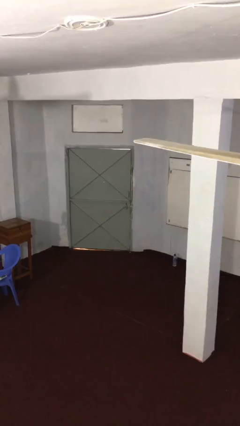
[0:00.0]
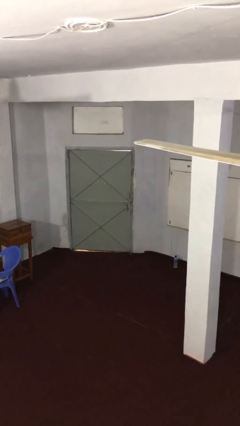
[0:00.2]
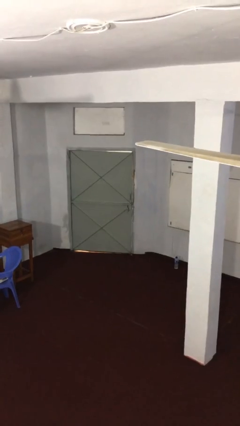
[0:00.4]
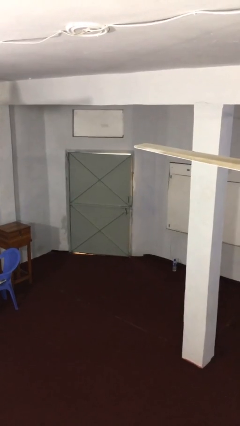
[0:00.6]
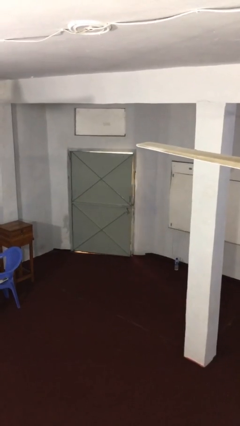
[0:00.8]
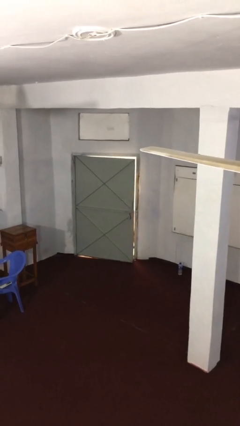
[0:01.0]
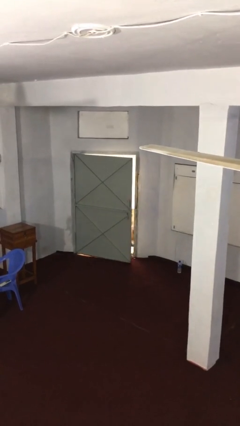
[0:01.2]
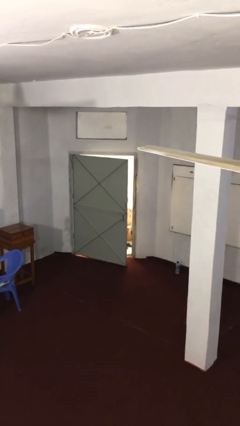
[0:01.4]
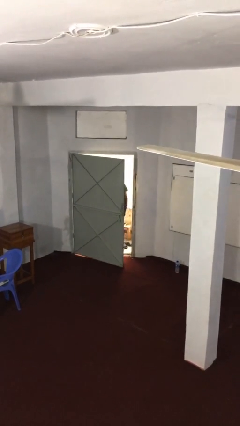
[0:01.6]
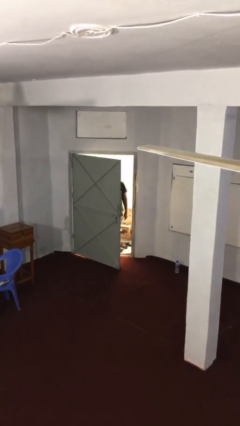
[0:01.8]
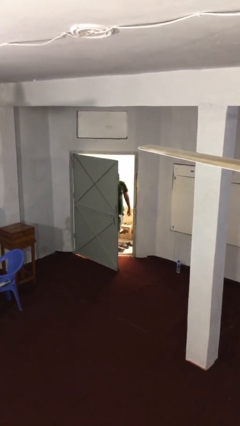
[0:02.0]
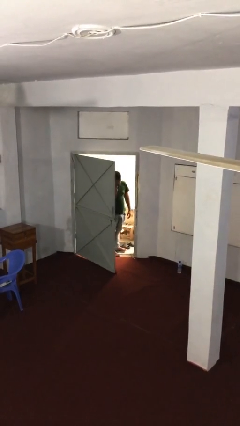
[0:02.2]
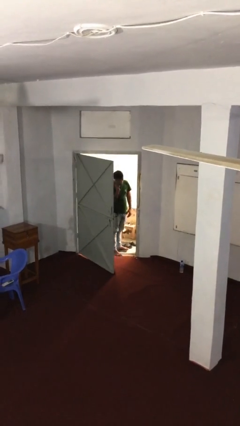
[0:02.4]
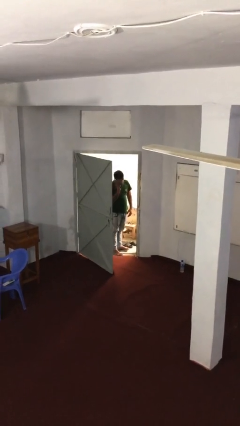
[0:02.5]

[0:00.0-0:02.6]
person opens facility door

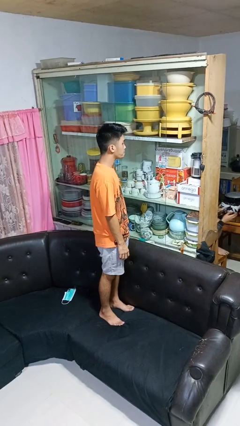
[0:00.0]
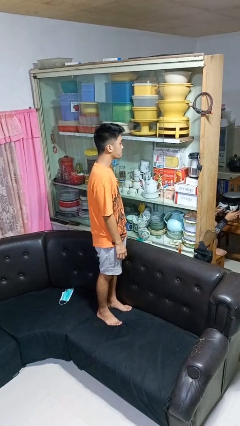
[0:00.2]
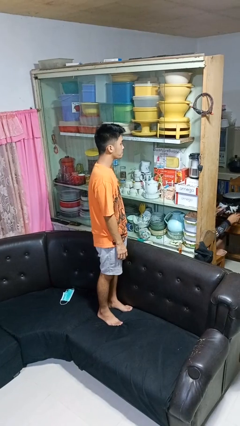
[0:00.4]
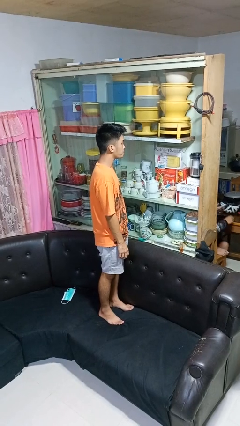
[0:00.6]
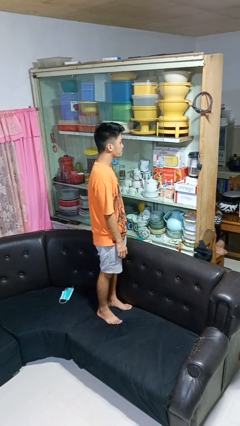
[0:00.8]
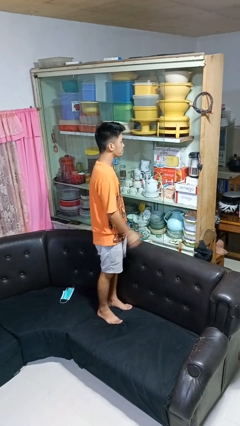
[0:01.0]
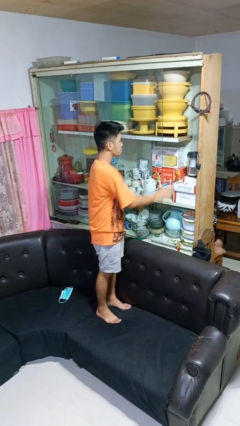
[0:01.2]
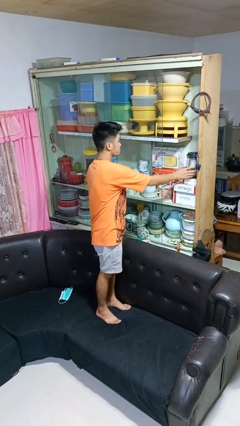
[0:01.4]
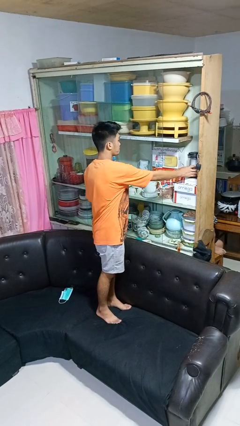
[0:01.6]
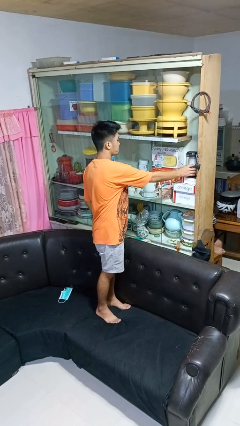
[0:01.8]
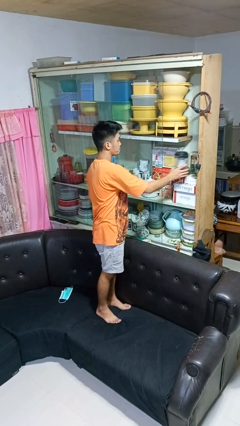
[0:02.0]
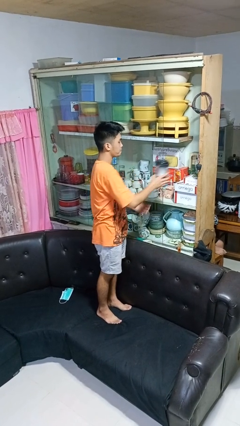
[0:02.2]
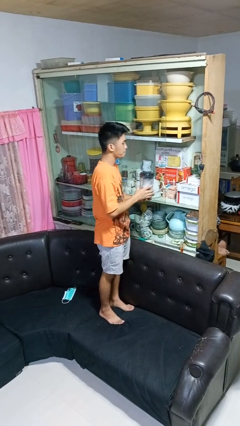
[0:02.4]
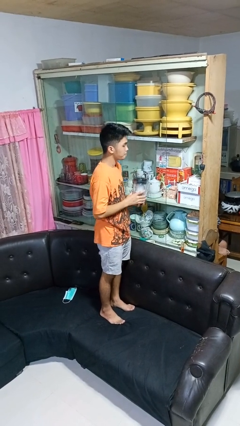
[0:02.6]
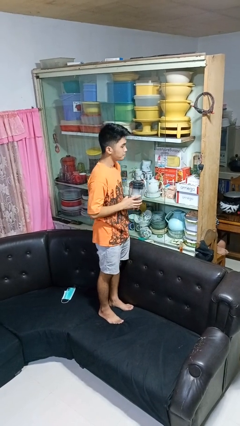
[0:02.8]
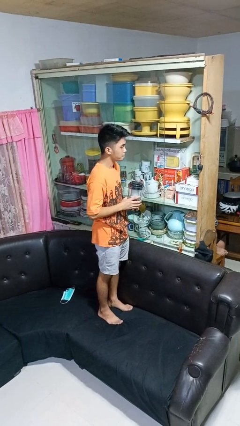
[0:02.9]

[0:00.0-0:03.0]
person picks up object from cabinet

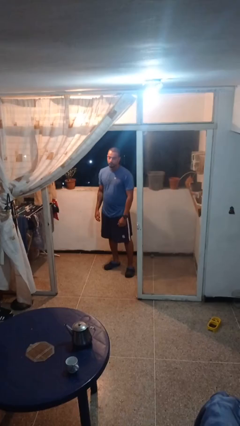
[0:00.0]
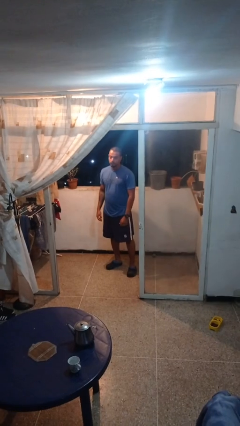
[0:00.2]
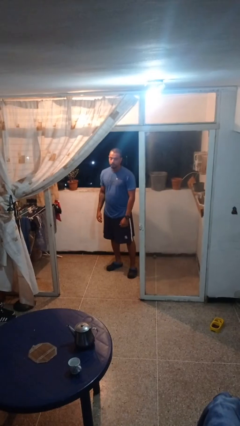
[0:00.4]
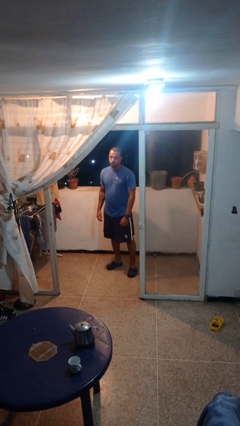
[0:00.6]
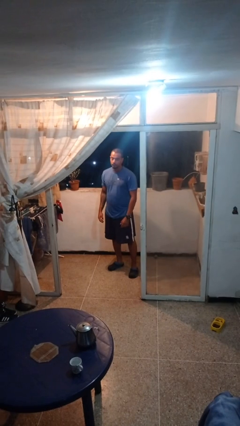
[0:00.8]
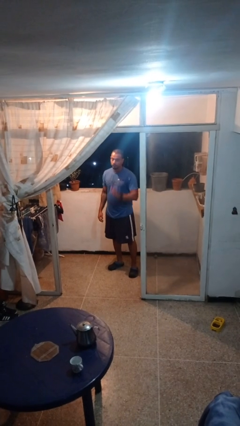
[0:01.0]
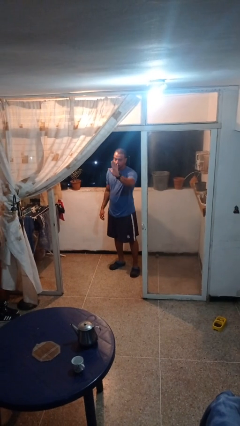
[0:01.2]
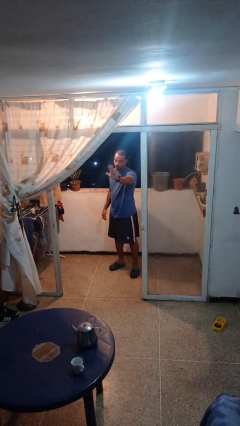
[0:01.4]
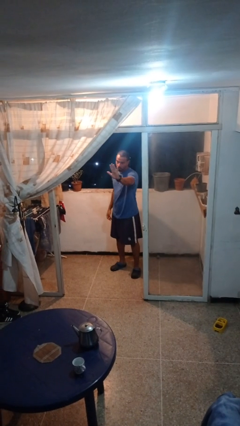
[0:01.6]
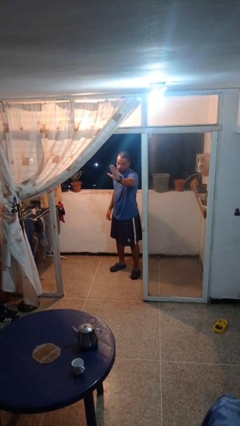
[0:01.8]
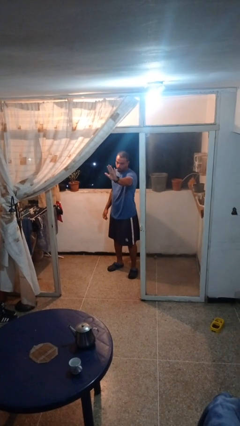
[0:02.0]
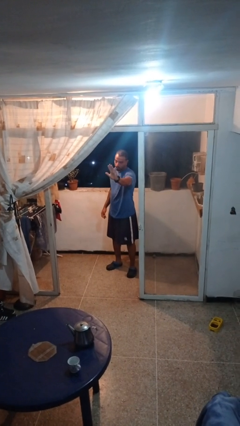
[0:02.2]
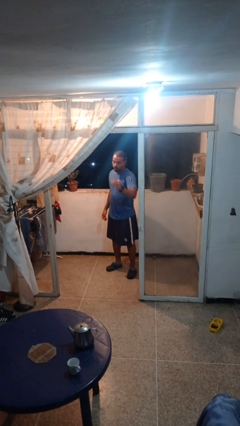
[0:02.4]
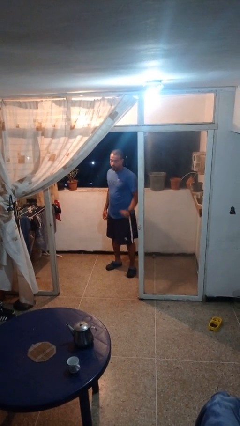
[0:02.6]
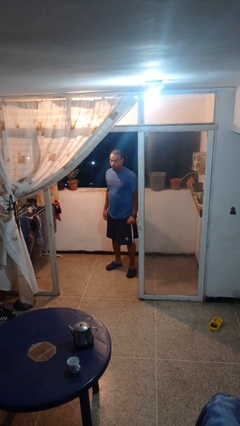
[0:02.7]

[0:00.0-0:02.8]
person gestures stop

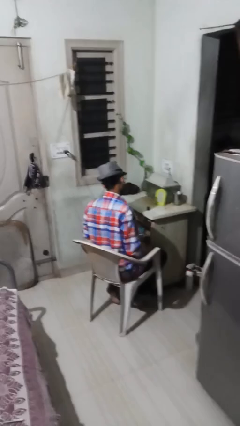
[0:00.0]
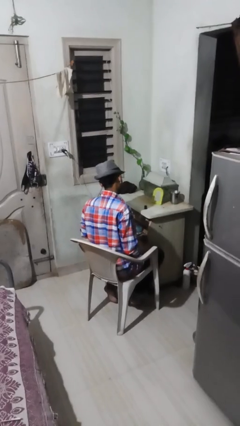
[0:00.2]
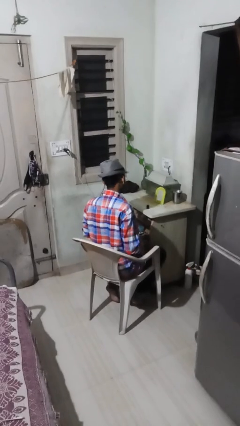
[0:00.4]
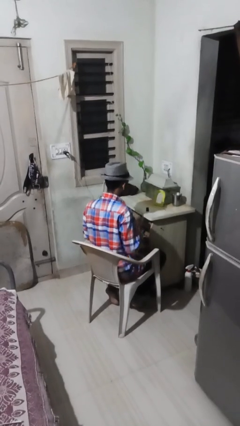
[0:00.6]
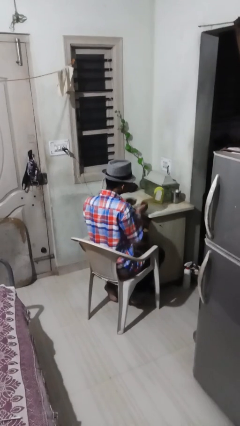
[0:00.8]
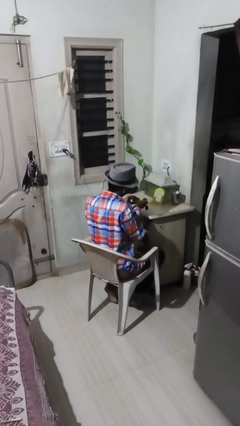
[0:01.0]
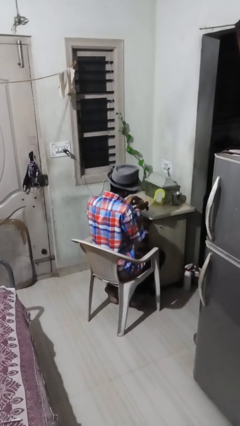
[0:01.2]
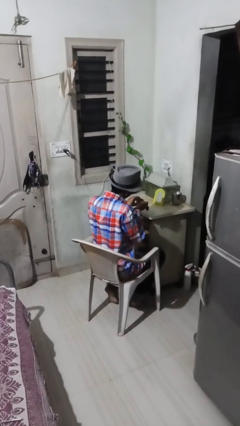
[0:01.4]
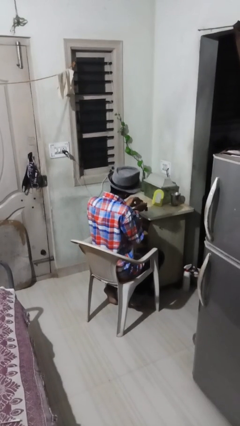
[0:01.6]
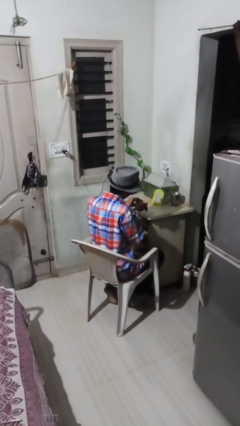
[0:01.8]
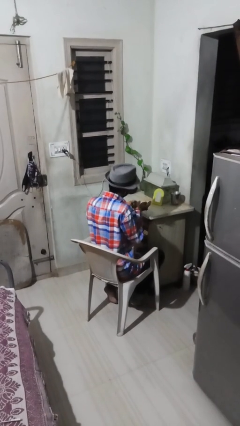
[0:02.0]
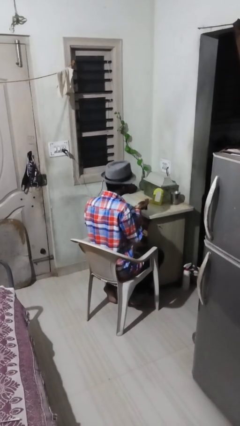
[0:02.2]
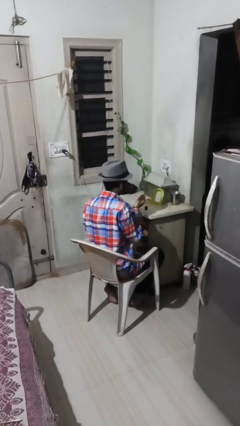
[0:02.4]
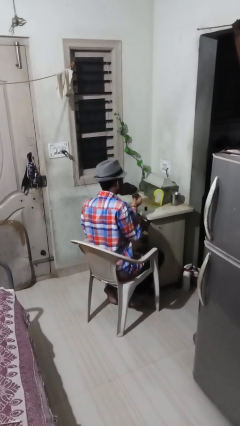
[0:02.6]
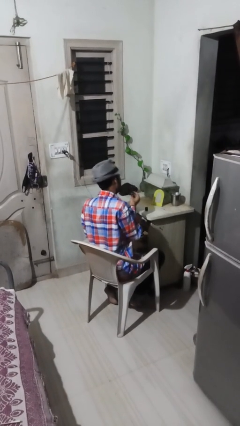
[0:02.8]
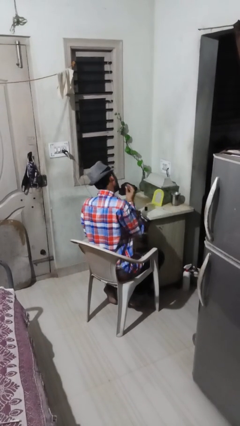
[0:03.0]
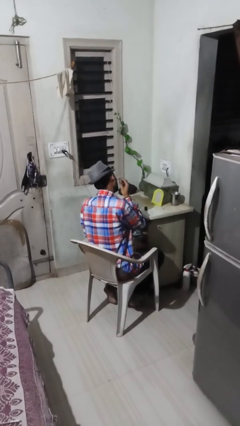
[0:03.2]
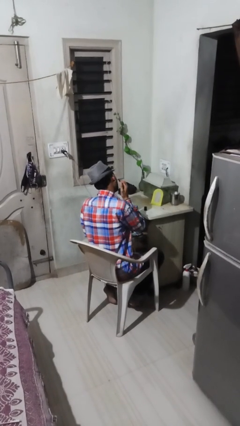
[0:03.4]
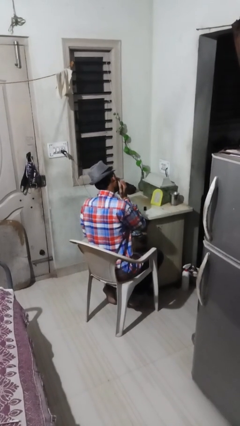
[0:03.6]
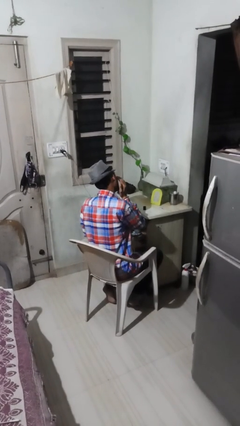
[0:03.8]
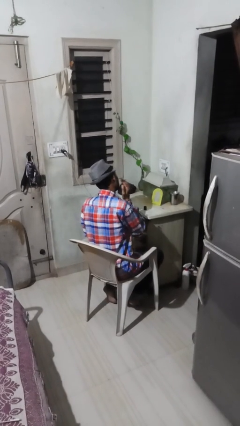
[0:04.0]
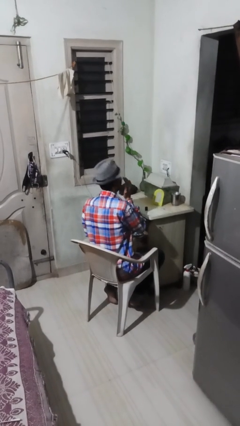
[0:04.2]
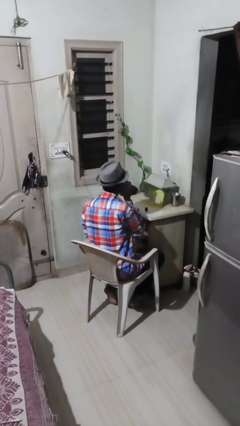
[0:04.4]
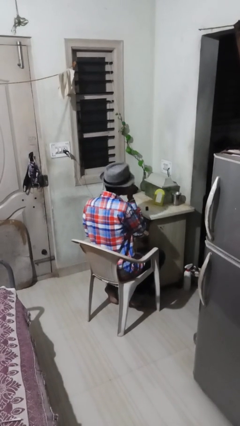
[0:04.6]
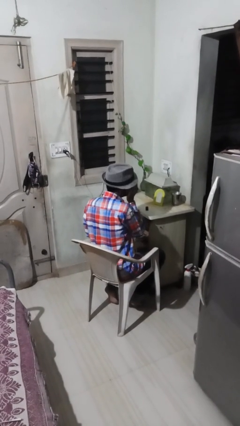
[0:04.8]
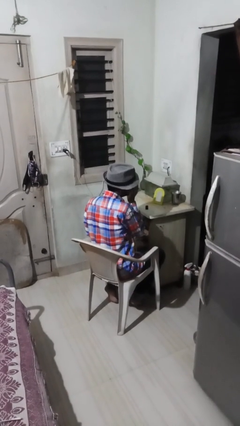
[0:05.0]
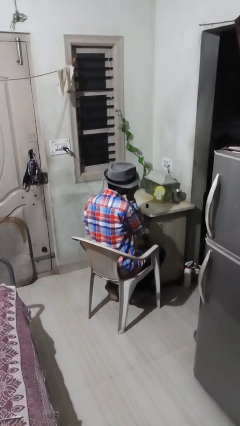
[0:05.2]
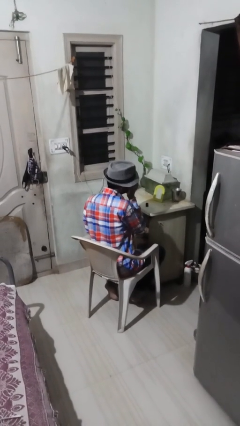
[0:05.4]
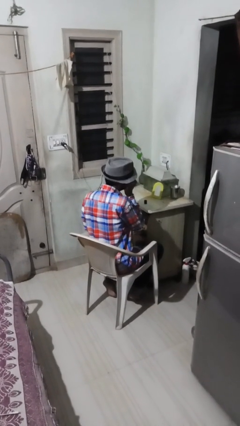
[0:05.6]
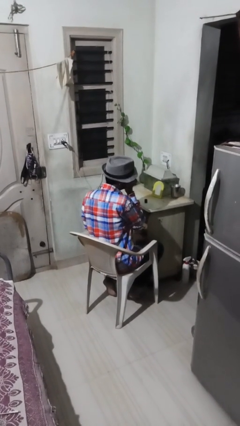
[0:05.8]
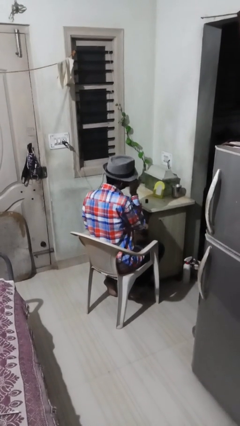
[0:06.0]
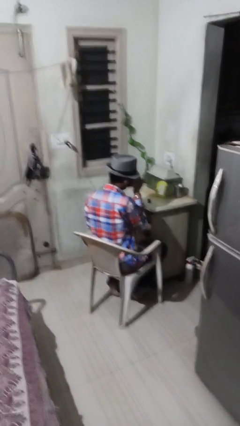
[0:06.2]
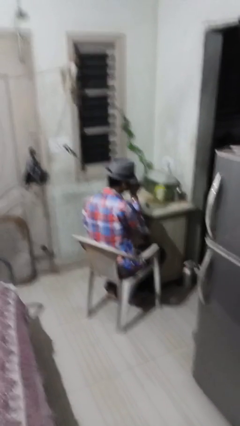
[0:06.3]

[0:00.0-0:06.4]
person applies foundation makeup

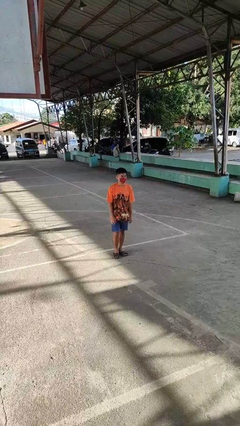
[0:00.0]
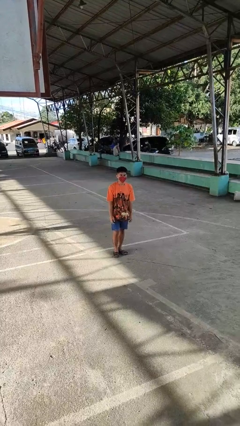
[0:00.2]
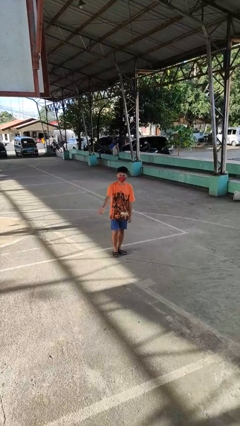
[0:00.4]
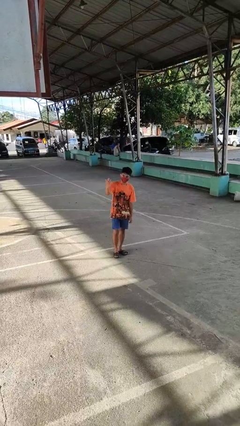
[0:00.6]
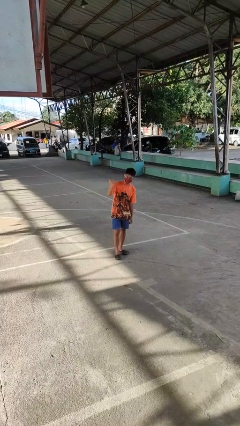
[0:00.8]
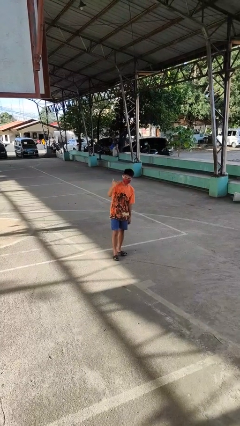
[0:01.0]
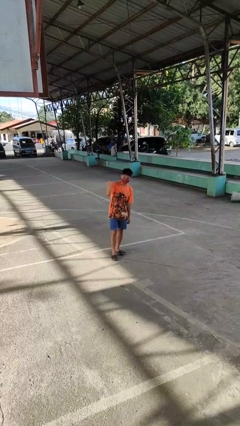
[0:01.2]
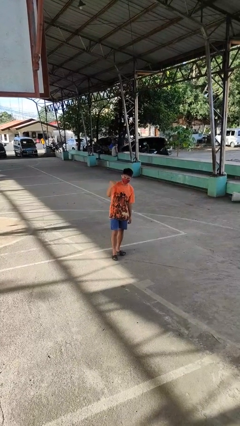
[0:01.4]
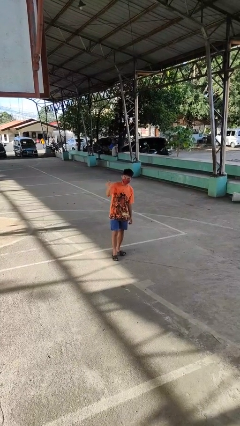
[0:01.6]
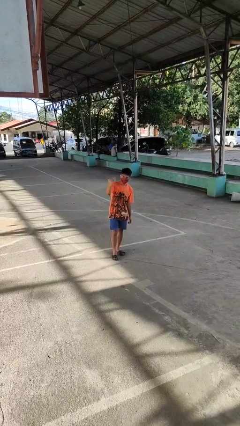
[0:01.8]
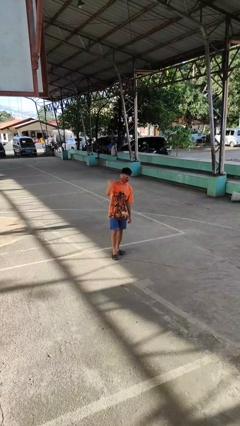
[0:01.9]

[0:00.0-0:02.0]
person gestures come here

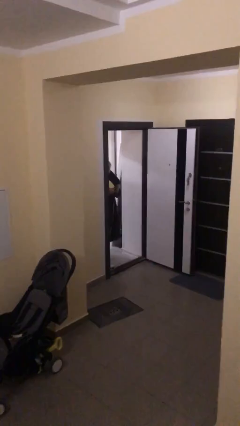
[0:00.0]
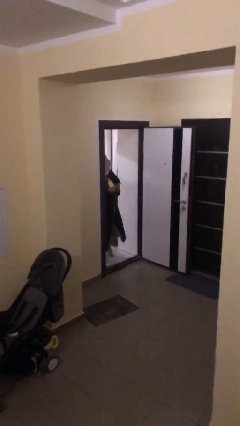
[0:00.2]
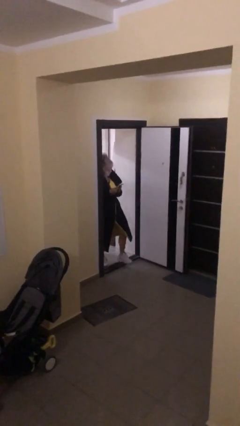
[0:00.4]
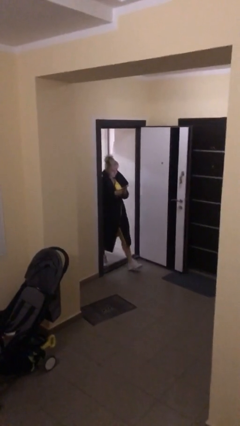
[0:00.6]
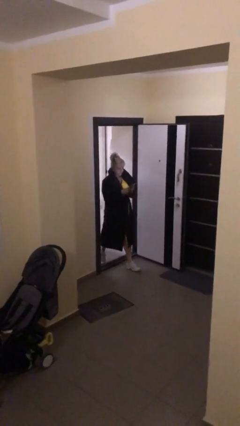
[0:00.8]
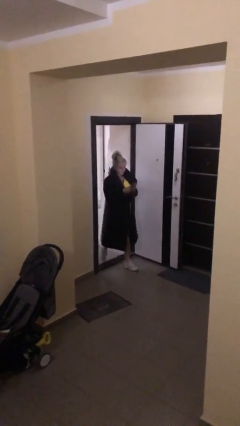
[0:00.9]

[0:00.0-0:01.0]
person enters scene through structure
